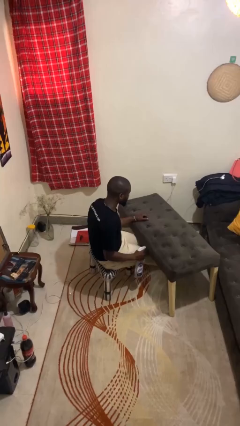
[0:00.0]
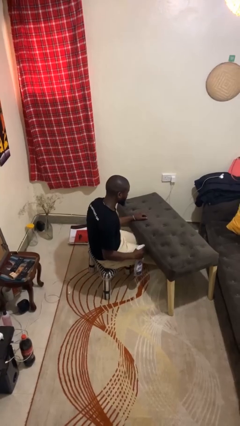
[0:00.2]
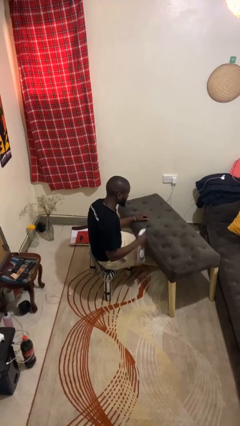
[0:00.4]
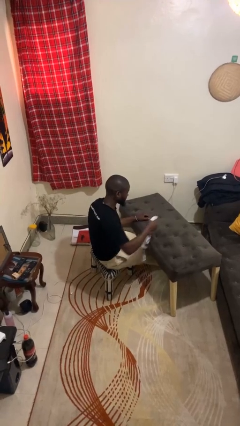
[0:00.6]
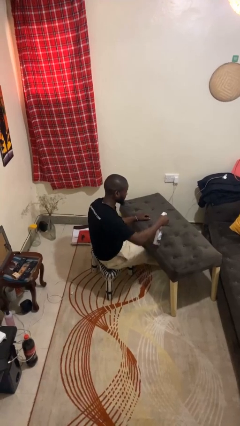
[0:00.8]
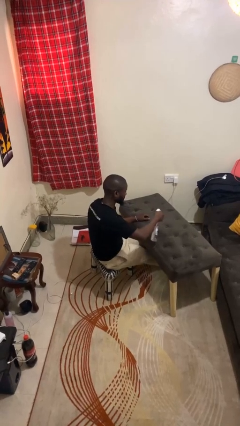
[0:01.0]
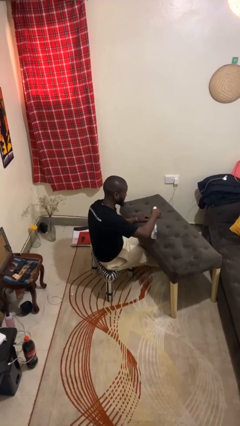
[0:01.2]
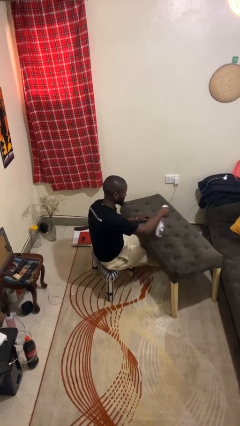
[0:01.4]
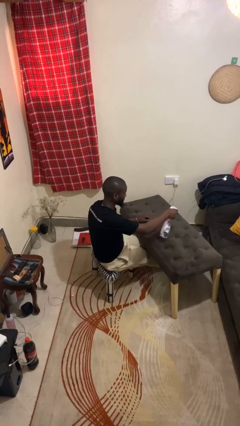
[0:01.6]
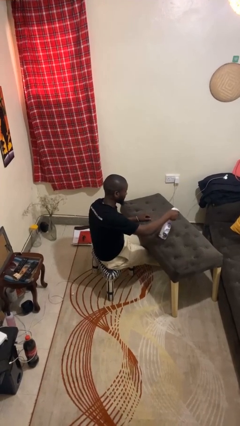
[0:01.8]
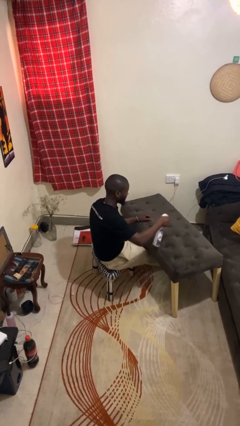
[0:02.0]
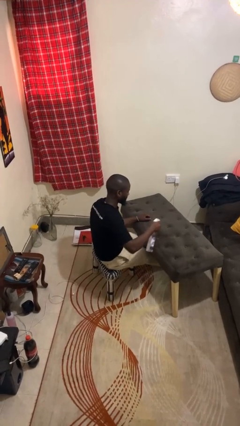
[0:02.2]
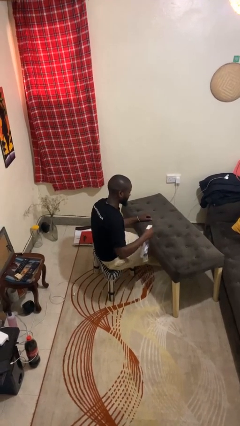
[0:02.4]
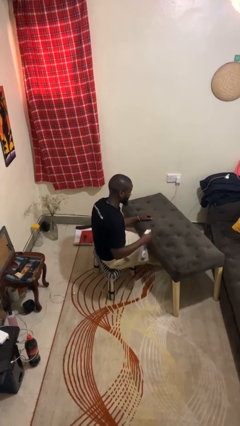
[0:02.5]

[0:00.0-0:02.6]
person sprays from bottle

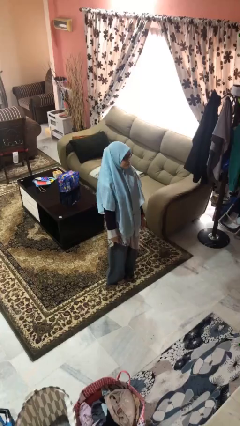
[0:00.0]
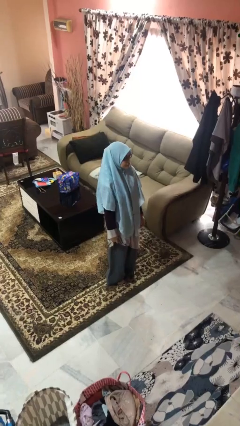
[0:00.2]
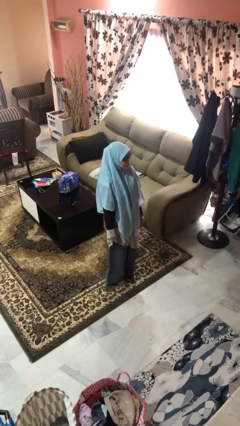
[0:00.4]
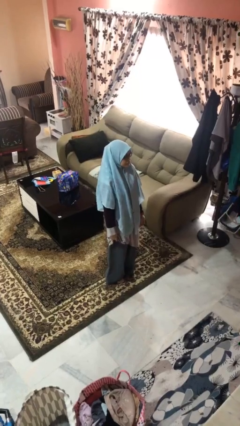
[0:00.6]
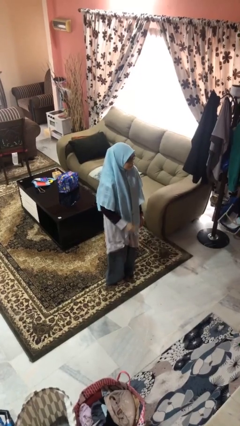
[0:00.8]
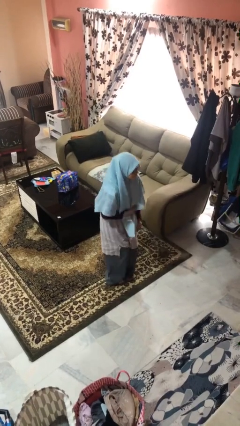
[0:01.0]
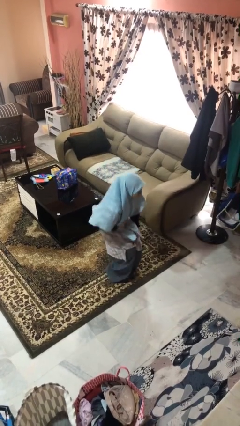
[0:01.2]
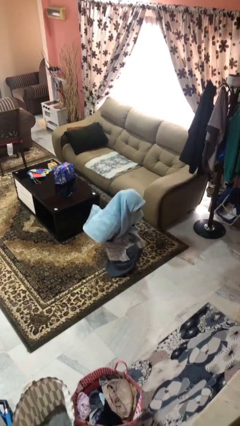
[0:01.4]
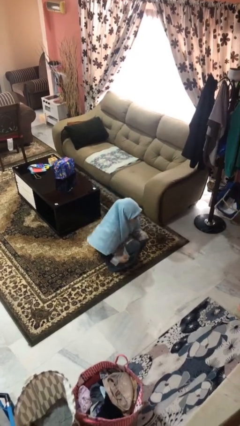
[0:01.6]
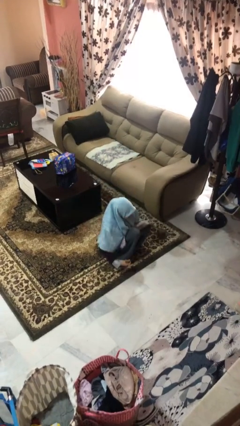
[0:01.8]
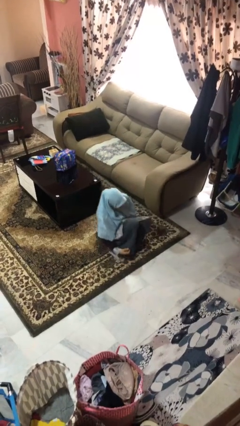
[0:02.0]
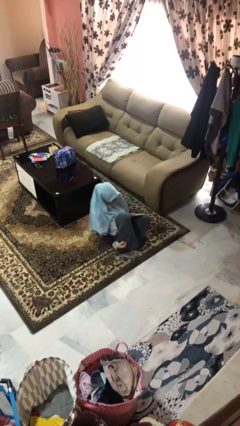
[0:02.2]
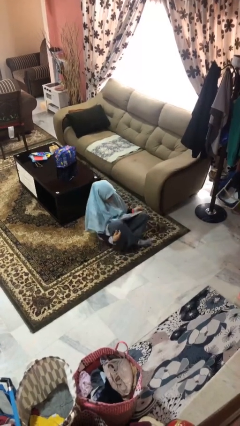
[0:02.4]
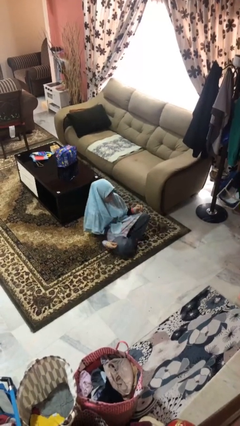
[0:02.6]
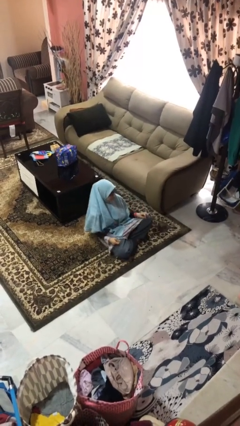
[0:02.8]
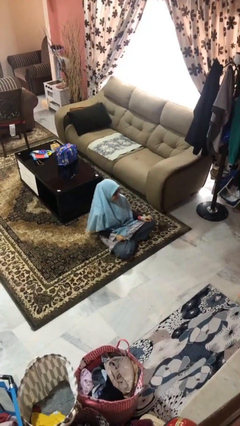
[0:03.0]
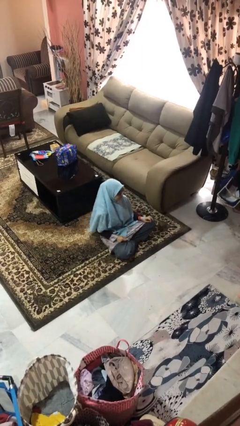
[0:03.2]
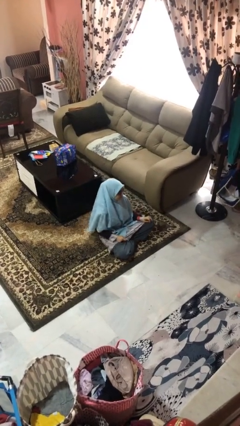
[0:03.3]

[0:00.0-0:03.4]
person sits crisscross

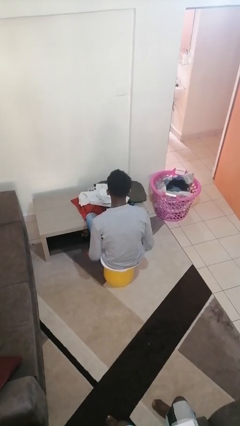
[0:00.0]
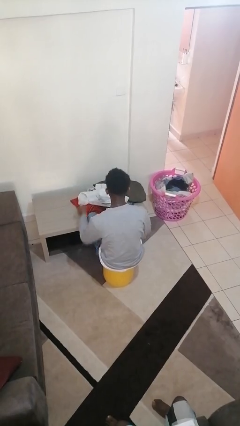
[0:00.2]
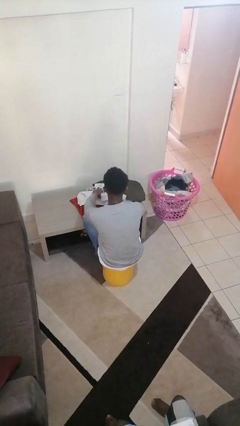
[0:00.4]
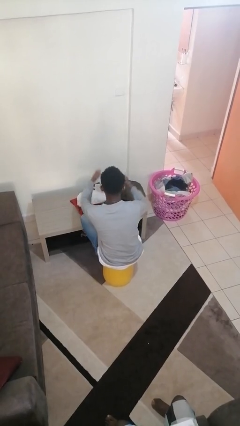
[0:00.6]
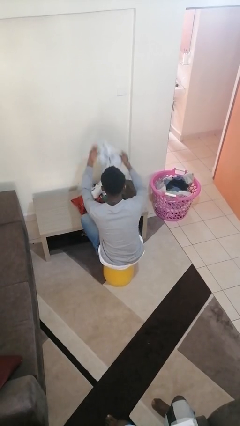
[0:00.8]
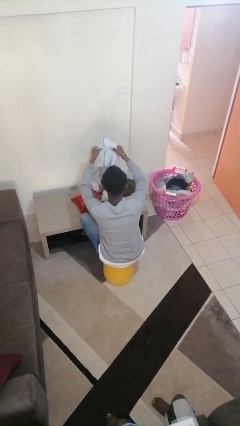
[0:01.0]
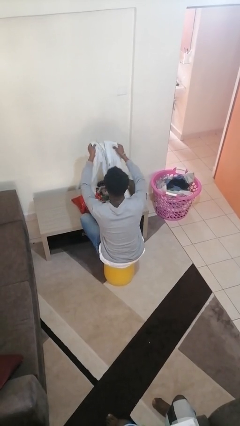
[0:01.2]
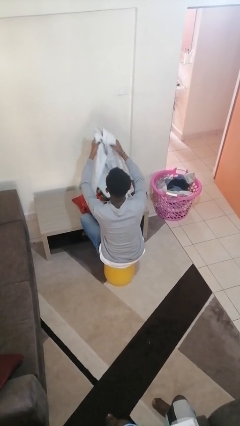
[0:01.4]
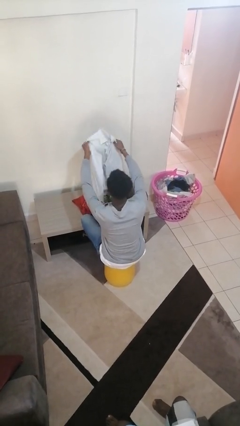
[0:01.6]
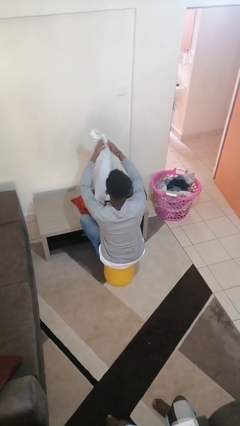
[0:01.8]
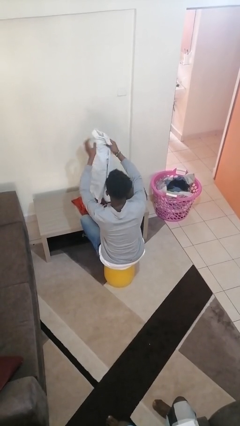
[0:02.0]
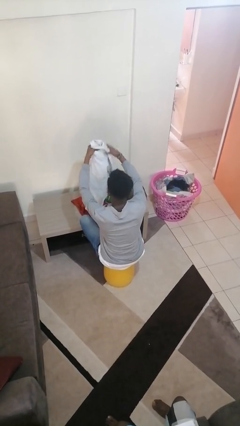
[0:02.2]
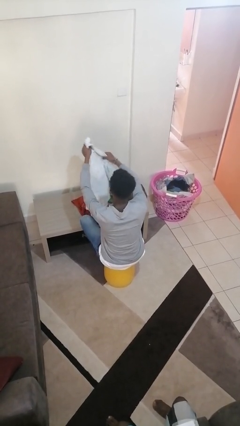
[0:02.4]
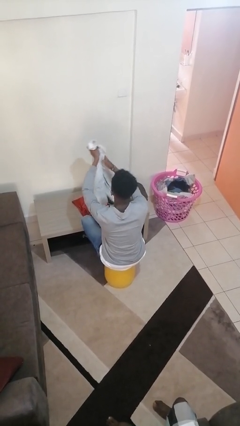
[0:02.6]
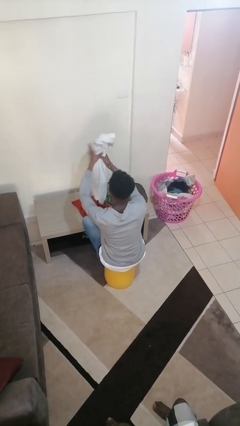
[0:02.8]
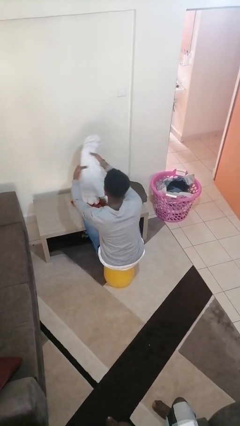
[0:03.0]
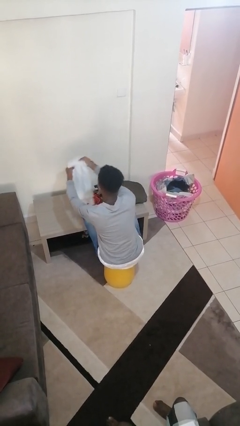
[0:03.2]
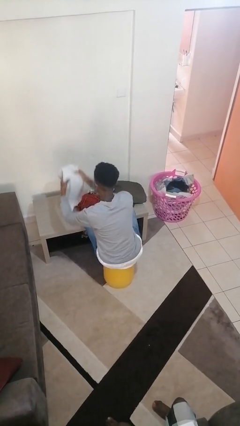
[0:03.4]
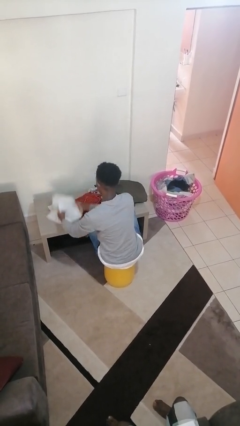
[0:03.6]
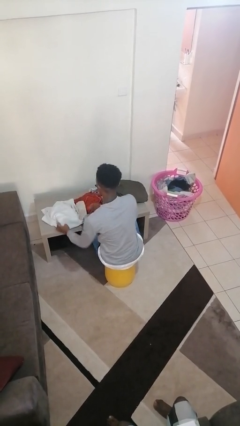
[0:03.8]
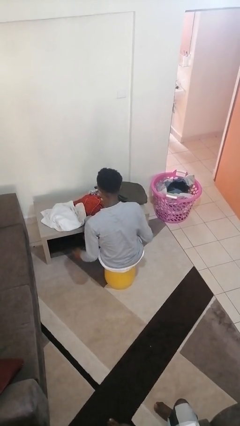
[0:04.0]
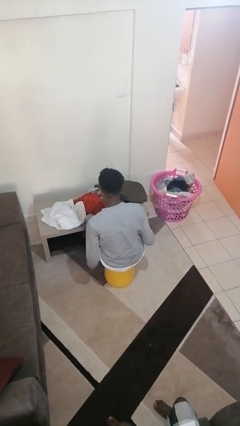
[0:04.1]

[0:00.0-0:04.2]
person folds shirt

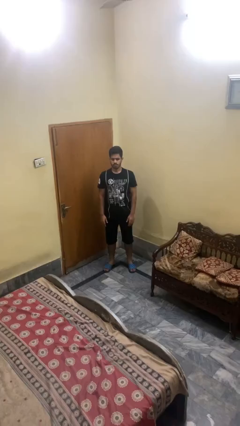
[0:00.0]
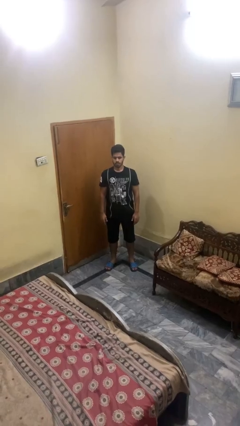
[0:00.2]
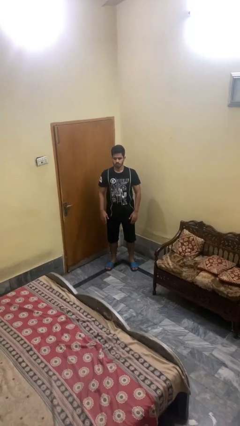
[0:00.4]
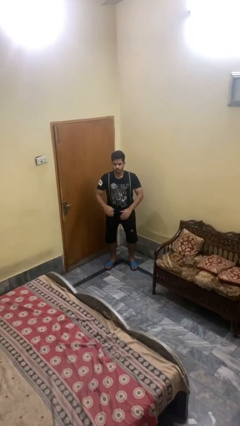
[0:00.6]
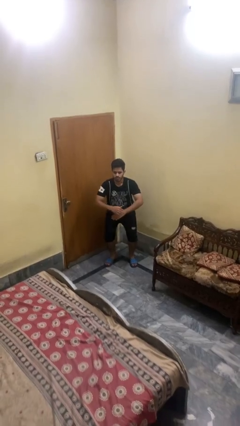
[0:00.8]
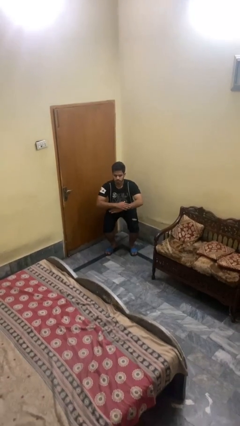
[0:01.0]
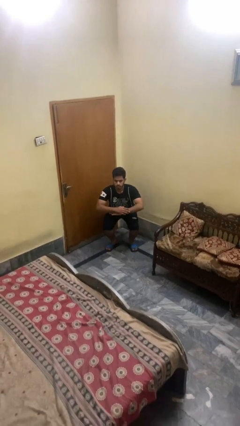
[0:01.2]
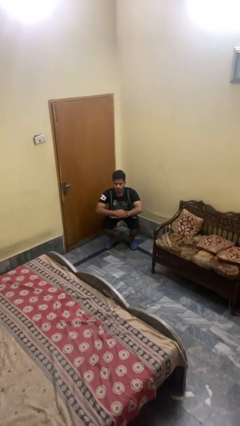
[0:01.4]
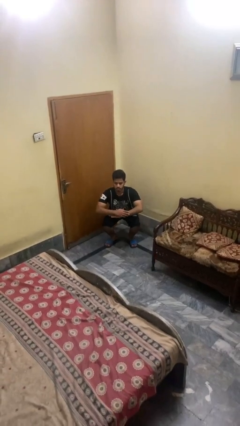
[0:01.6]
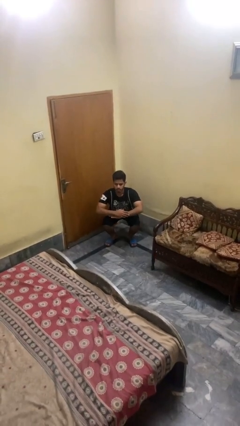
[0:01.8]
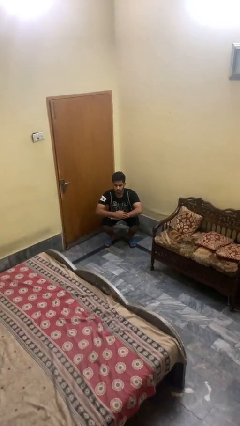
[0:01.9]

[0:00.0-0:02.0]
person squats

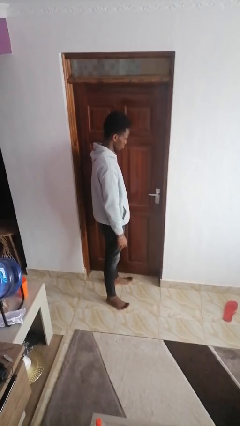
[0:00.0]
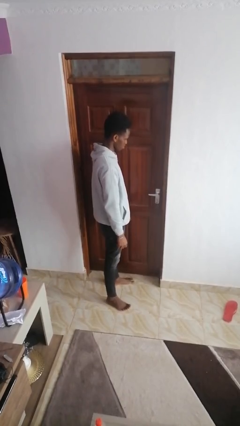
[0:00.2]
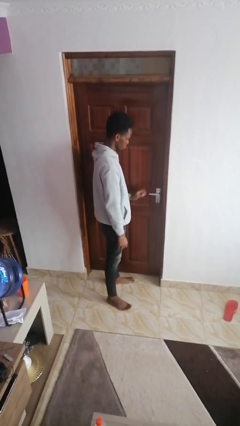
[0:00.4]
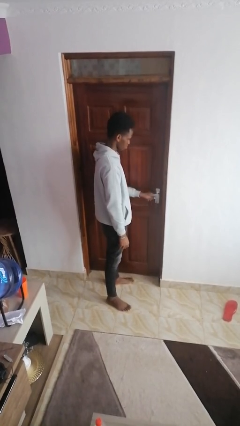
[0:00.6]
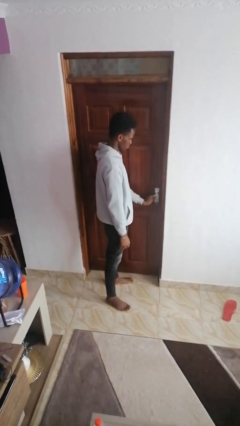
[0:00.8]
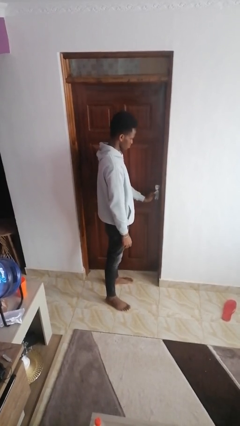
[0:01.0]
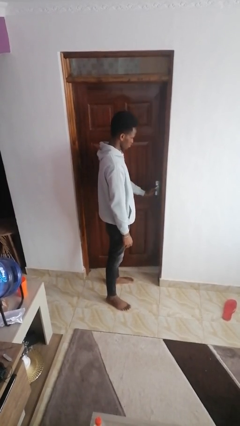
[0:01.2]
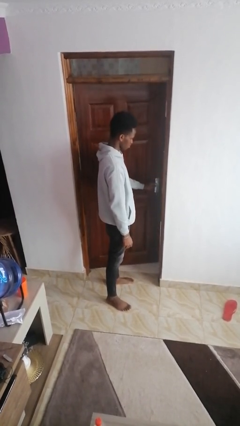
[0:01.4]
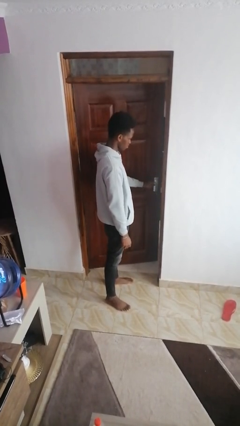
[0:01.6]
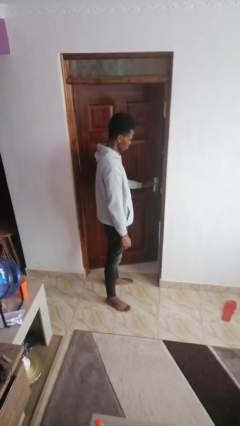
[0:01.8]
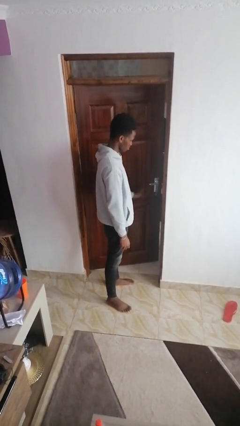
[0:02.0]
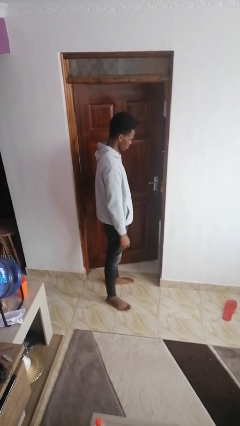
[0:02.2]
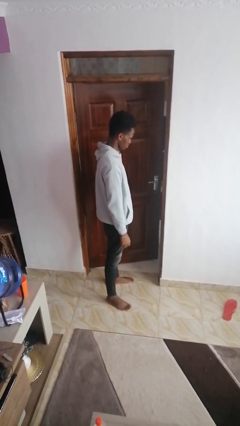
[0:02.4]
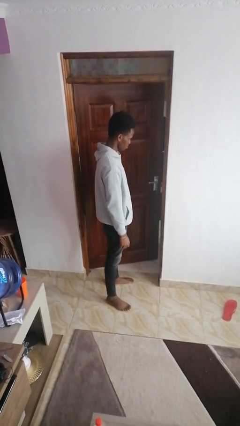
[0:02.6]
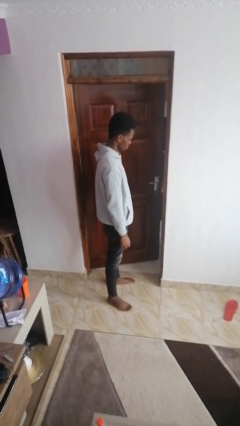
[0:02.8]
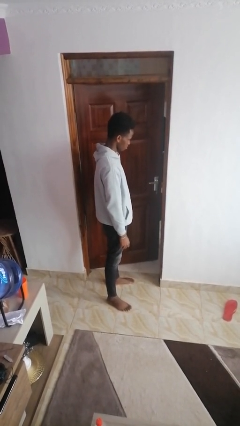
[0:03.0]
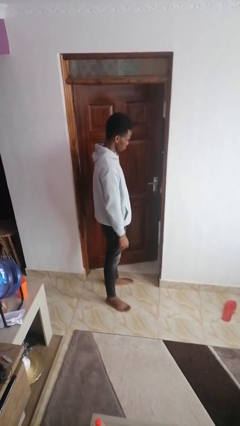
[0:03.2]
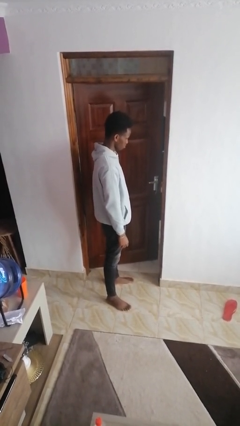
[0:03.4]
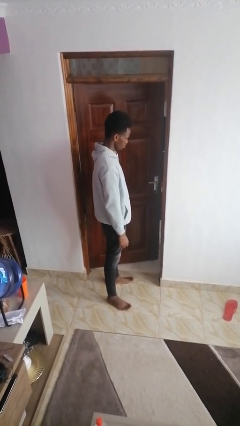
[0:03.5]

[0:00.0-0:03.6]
person opens facility door

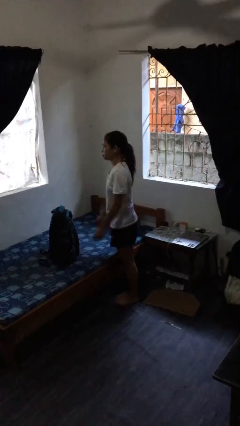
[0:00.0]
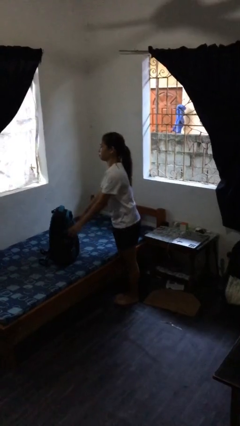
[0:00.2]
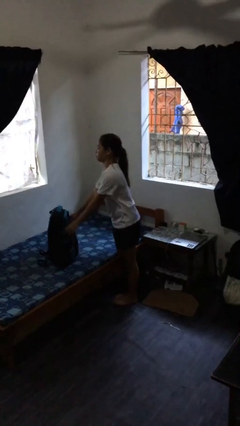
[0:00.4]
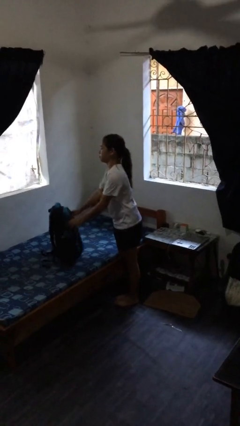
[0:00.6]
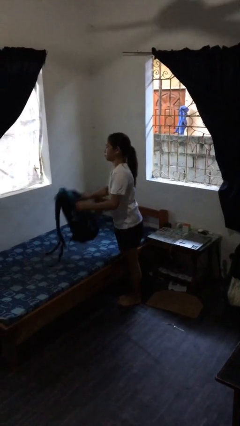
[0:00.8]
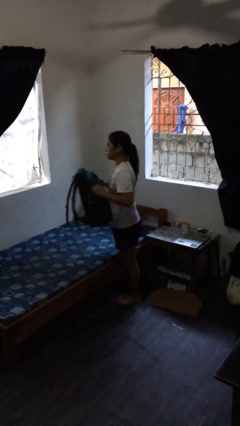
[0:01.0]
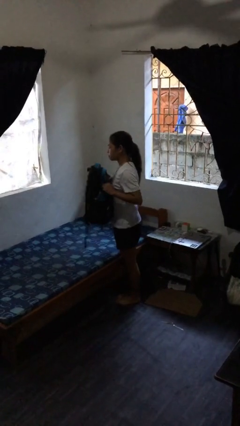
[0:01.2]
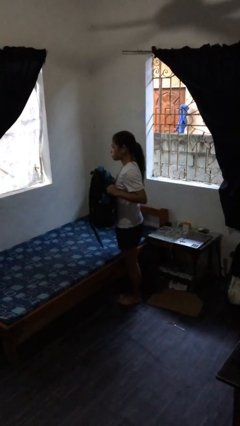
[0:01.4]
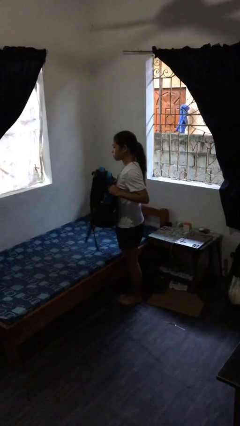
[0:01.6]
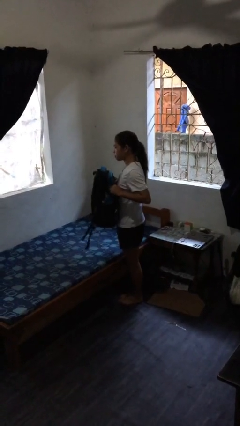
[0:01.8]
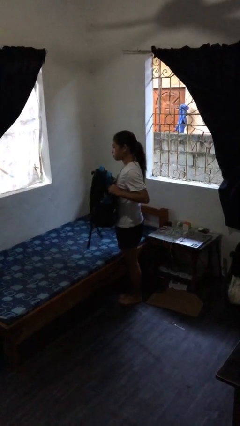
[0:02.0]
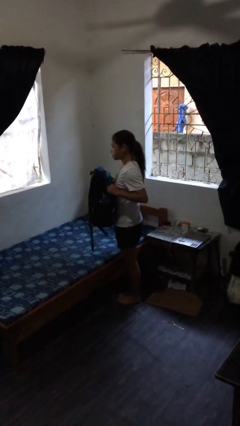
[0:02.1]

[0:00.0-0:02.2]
person picks up object from bed
